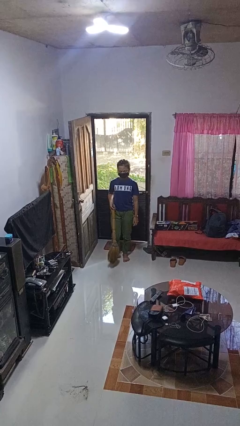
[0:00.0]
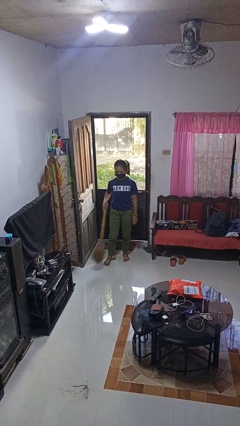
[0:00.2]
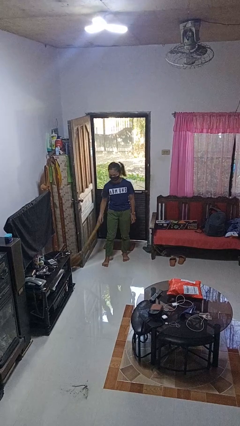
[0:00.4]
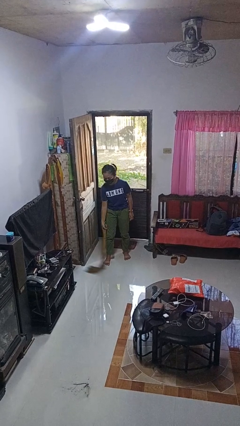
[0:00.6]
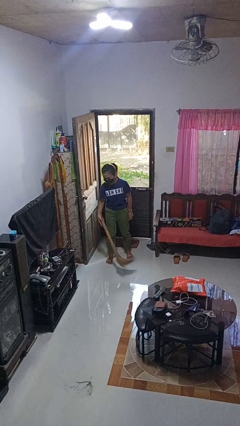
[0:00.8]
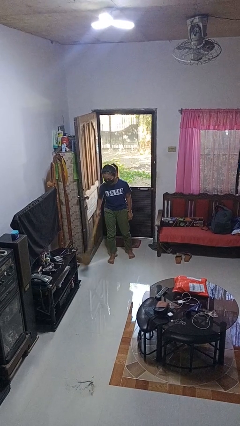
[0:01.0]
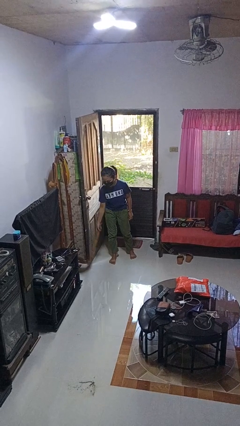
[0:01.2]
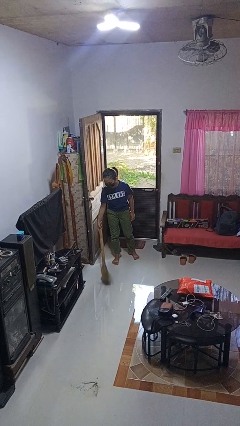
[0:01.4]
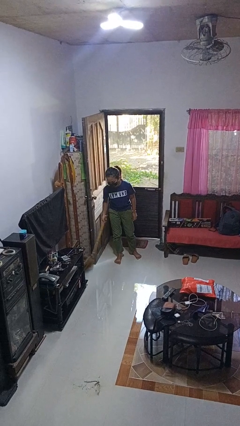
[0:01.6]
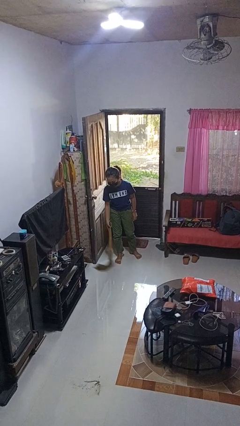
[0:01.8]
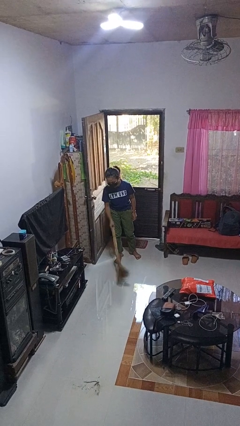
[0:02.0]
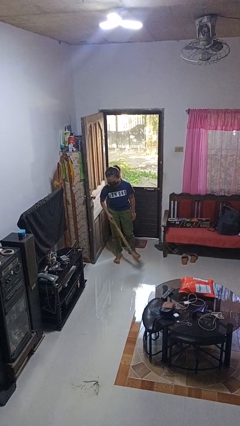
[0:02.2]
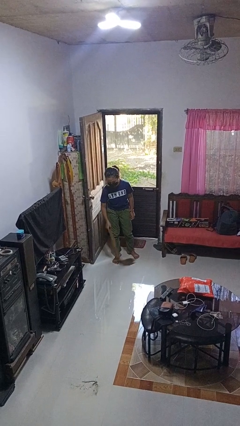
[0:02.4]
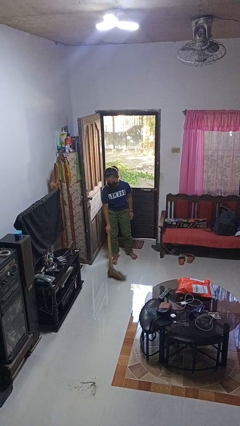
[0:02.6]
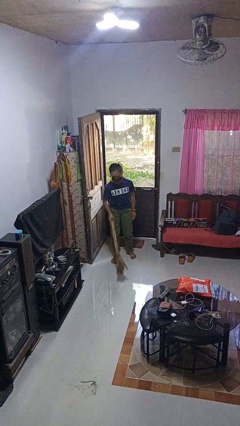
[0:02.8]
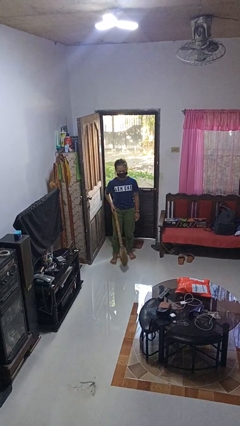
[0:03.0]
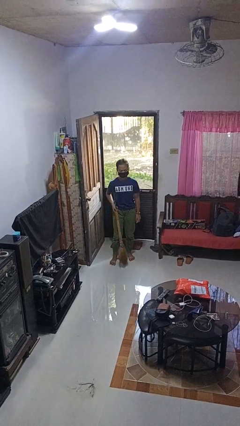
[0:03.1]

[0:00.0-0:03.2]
person sweeps floor

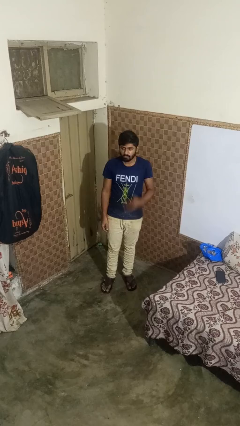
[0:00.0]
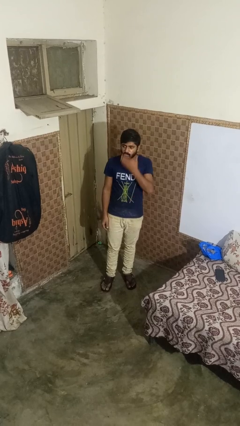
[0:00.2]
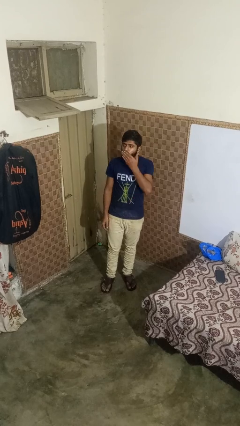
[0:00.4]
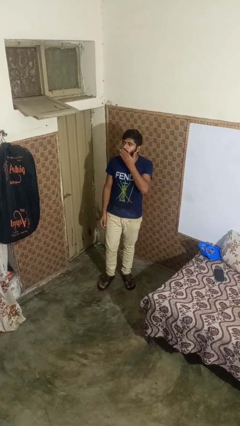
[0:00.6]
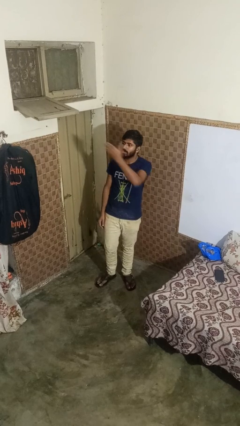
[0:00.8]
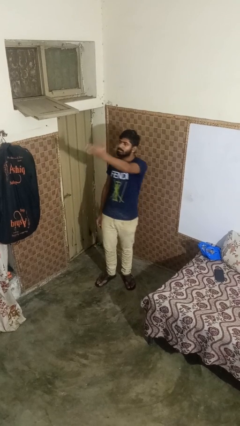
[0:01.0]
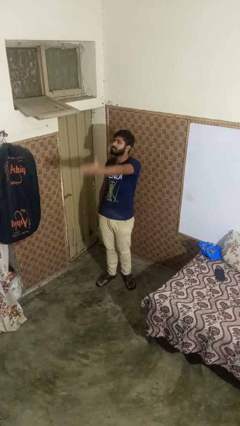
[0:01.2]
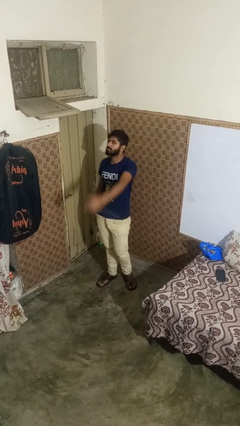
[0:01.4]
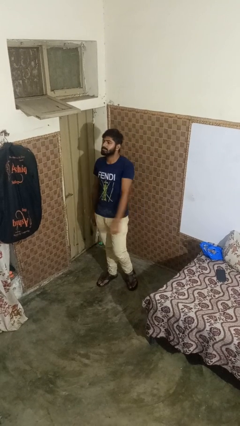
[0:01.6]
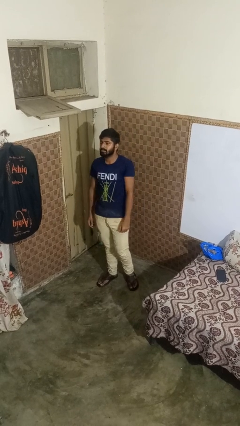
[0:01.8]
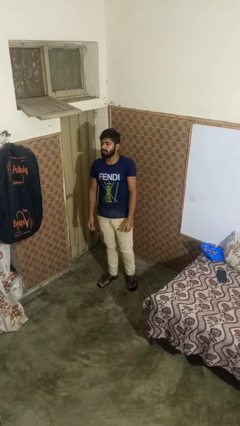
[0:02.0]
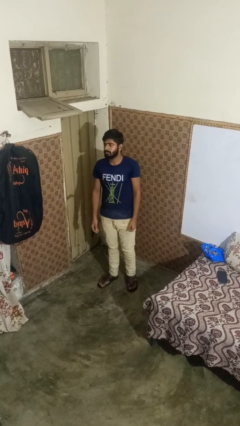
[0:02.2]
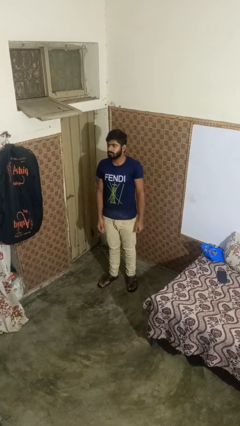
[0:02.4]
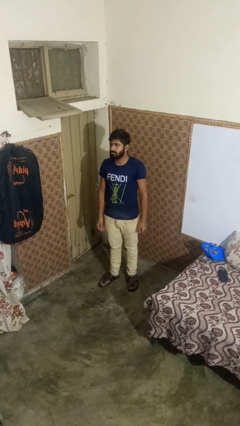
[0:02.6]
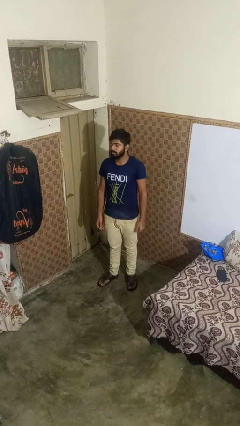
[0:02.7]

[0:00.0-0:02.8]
person gestures blow kiss

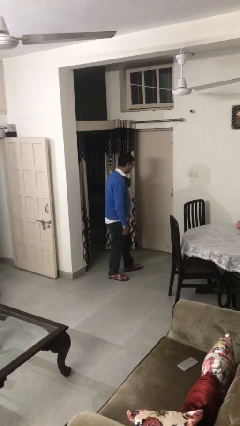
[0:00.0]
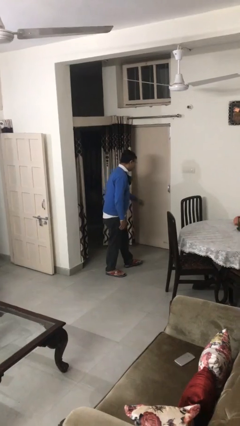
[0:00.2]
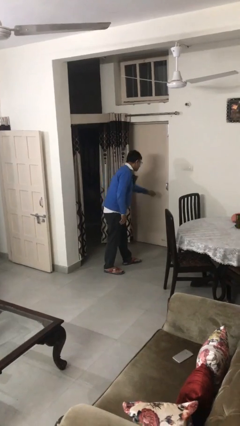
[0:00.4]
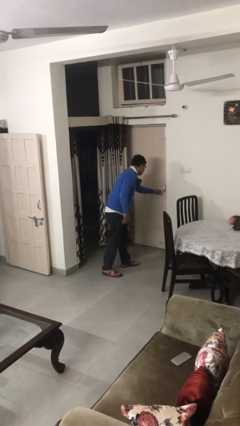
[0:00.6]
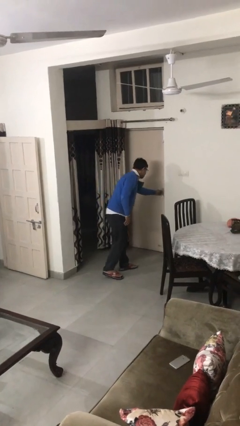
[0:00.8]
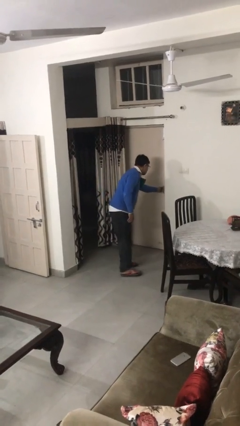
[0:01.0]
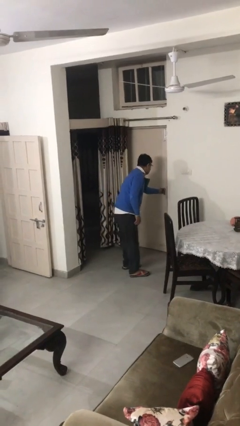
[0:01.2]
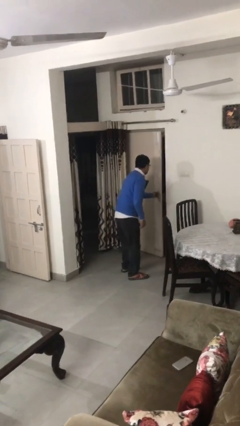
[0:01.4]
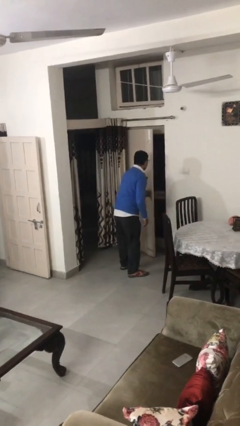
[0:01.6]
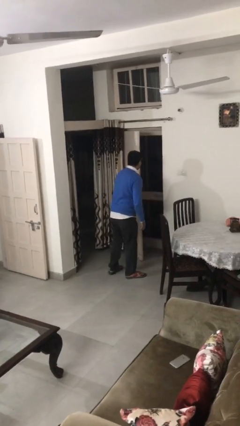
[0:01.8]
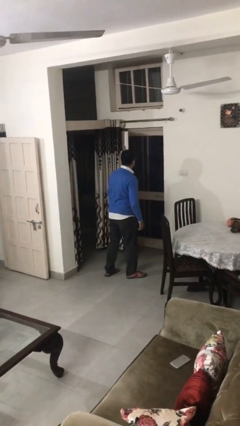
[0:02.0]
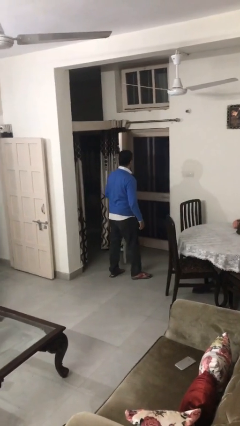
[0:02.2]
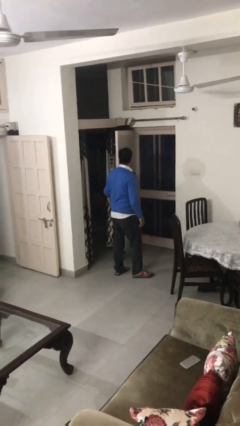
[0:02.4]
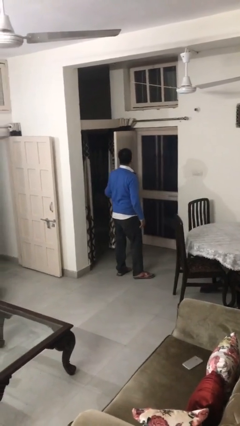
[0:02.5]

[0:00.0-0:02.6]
person opens facility door

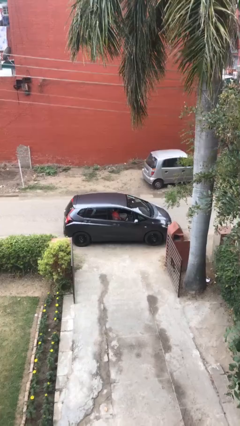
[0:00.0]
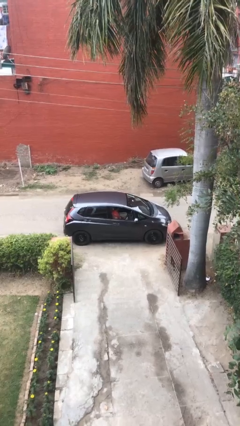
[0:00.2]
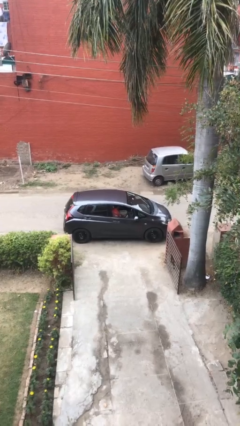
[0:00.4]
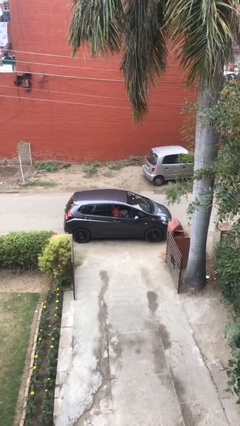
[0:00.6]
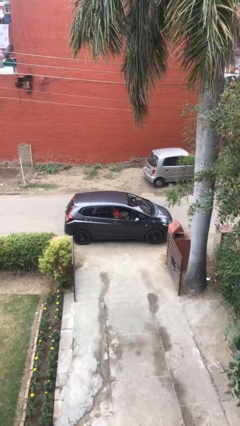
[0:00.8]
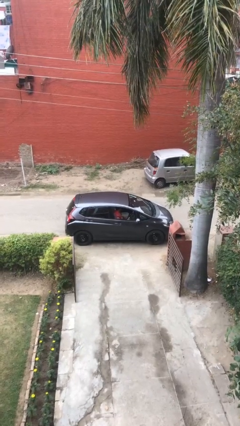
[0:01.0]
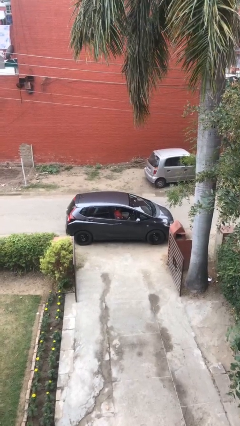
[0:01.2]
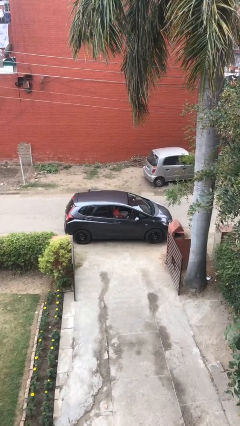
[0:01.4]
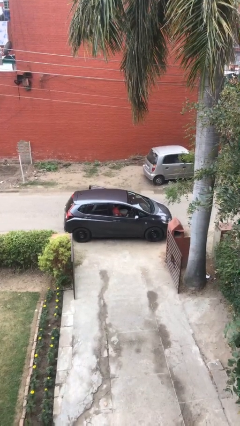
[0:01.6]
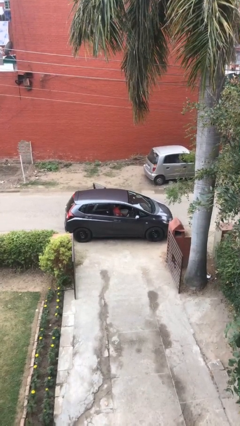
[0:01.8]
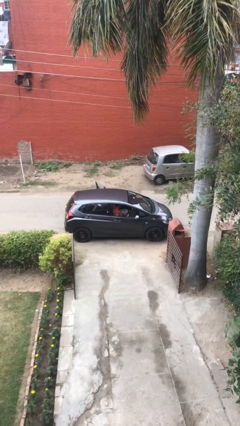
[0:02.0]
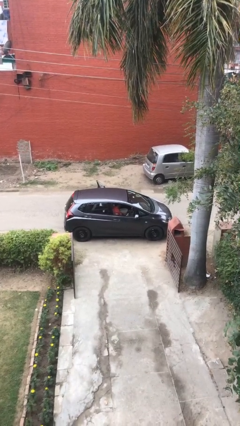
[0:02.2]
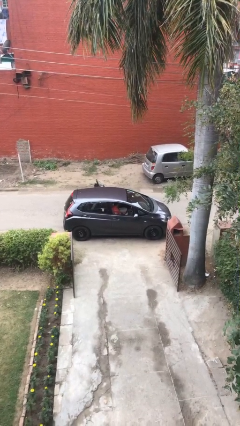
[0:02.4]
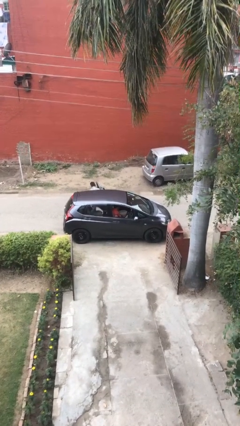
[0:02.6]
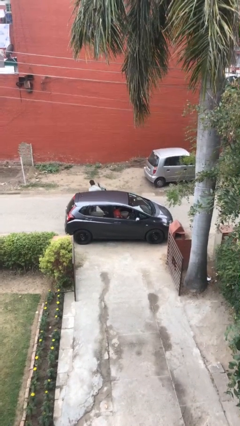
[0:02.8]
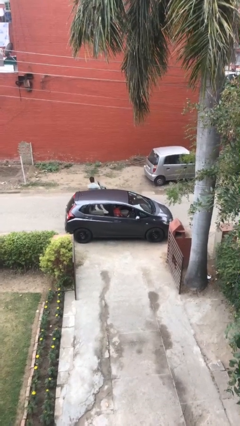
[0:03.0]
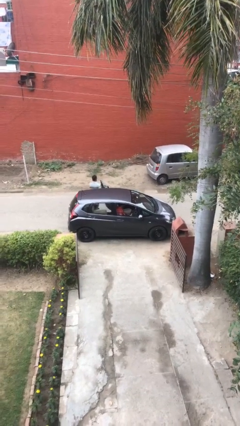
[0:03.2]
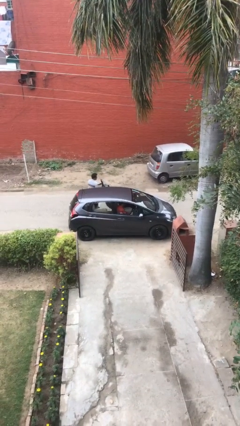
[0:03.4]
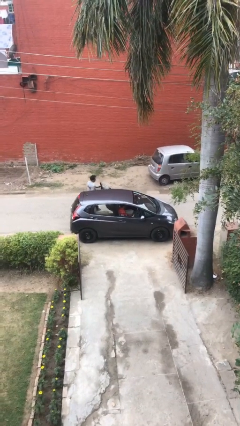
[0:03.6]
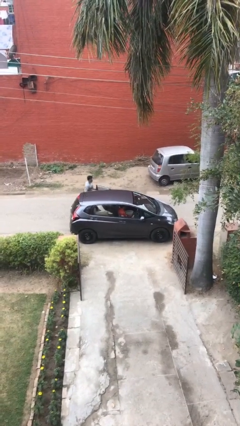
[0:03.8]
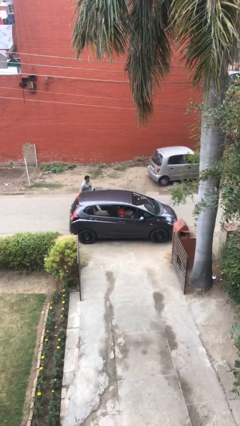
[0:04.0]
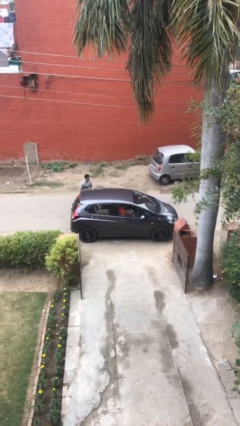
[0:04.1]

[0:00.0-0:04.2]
car drops off person

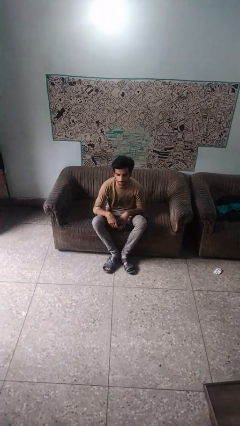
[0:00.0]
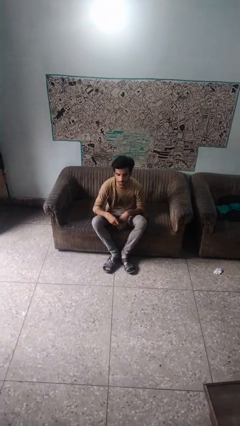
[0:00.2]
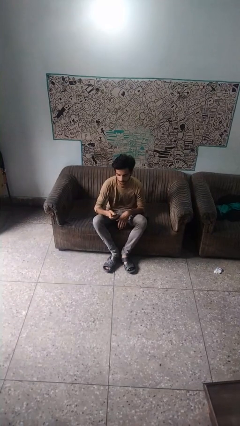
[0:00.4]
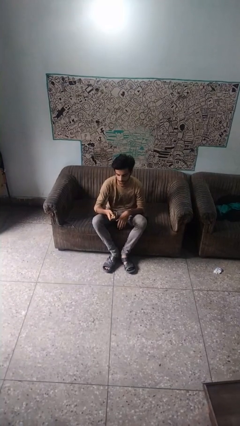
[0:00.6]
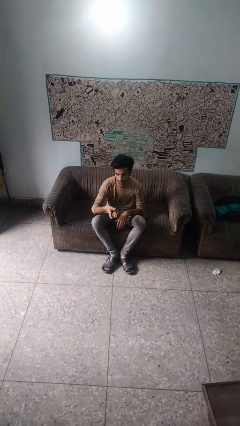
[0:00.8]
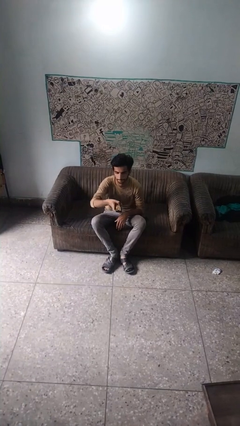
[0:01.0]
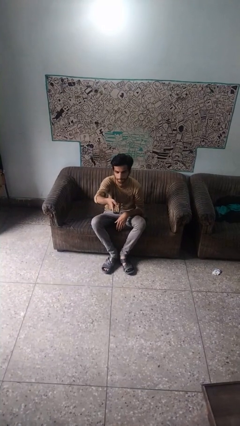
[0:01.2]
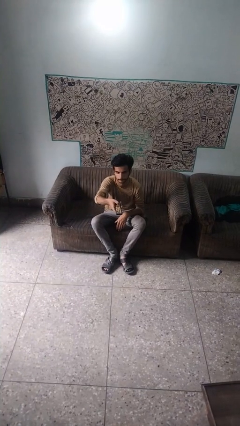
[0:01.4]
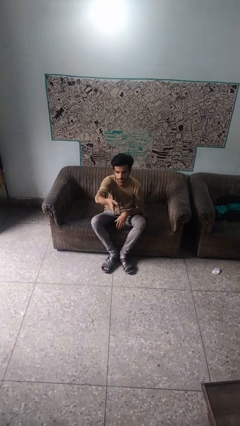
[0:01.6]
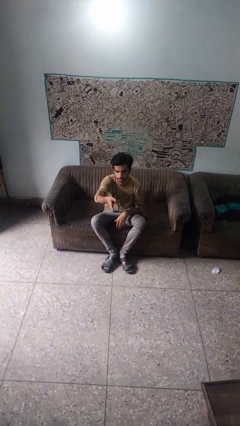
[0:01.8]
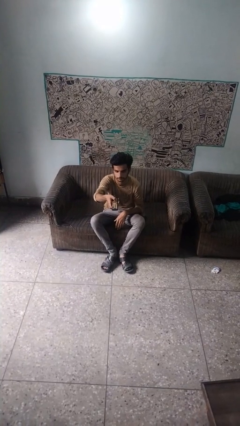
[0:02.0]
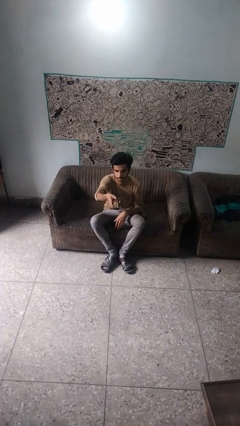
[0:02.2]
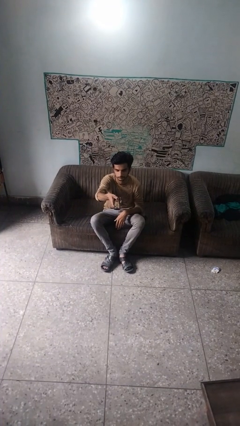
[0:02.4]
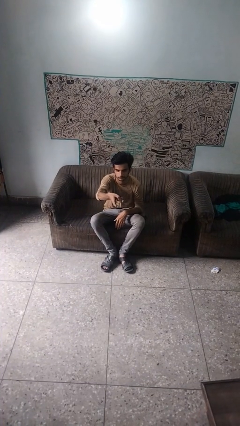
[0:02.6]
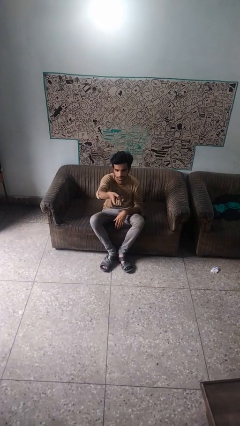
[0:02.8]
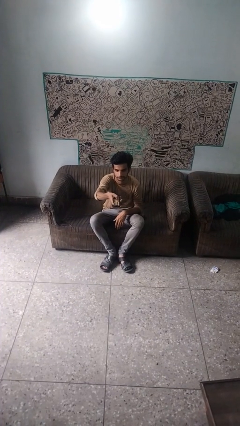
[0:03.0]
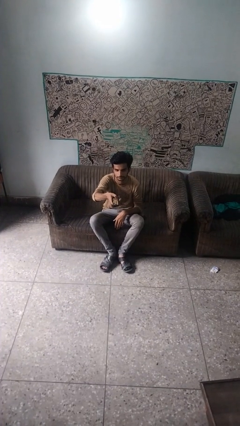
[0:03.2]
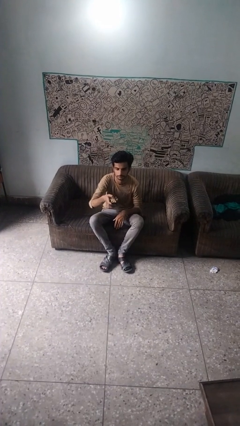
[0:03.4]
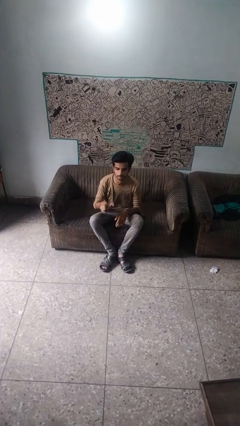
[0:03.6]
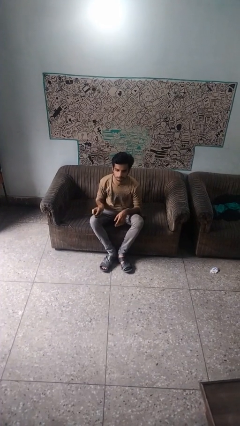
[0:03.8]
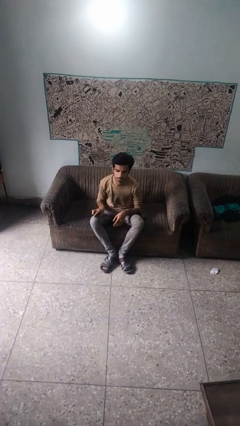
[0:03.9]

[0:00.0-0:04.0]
person uses television remote

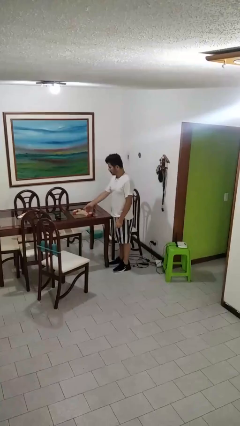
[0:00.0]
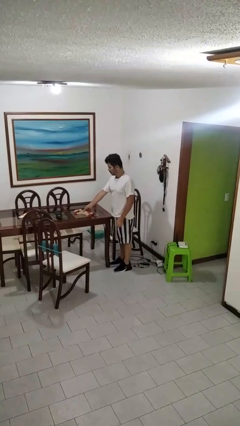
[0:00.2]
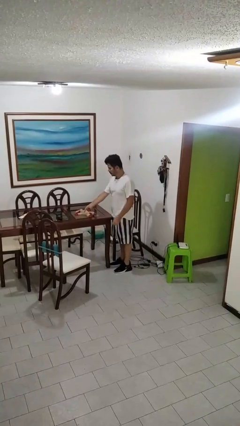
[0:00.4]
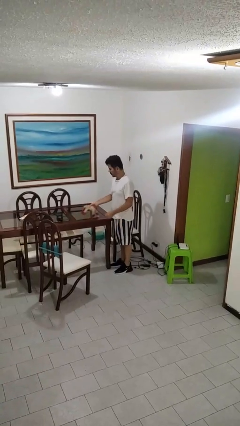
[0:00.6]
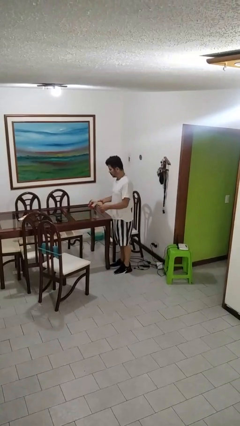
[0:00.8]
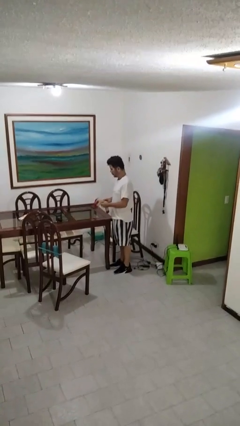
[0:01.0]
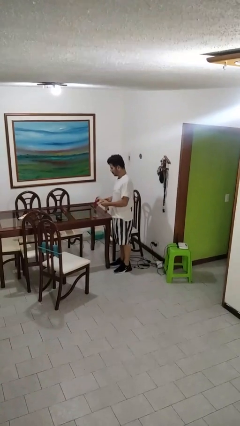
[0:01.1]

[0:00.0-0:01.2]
person picks up object from table
